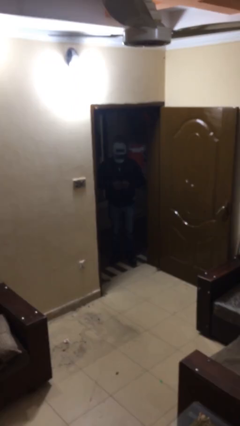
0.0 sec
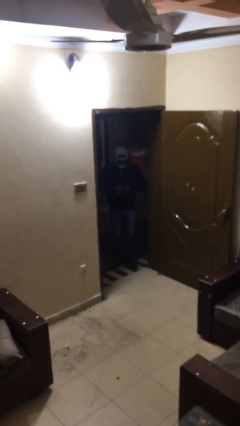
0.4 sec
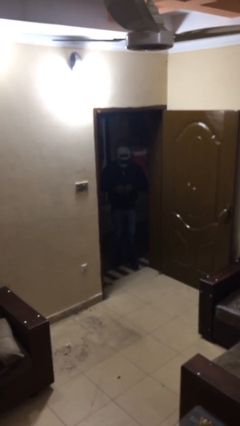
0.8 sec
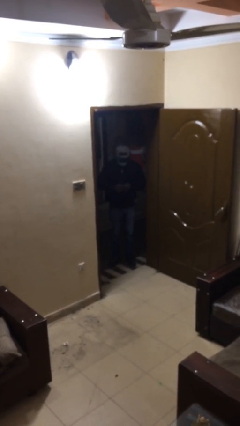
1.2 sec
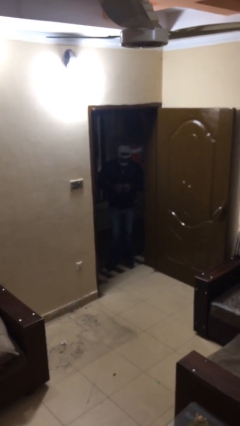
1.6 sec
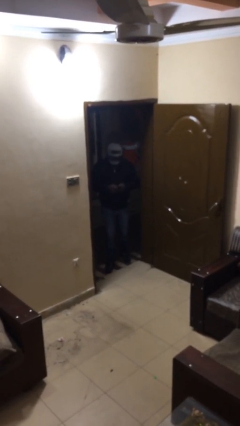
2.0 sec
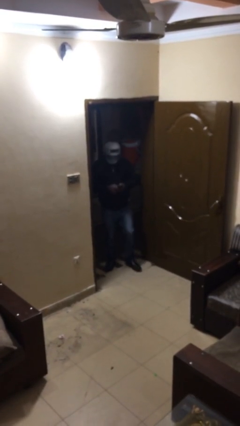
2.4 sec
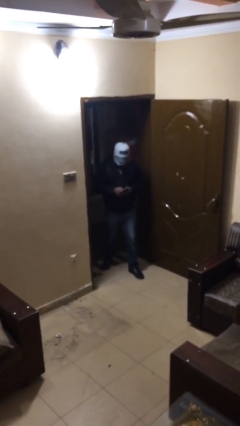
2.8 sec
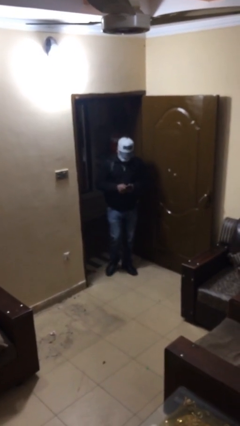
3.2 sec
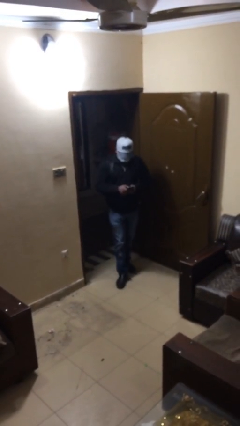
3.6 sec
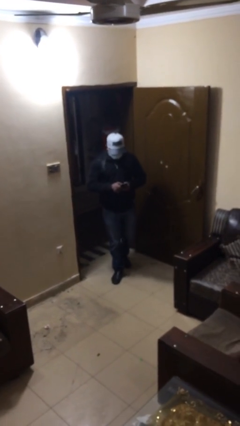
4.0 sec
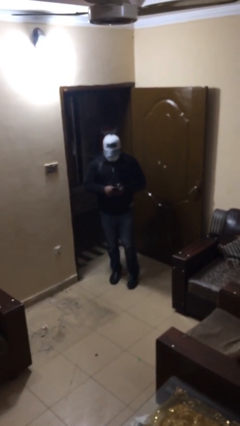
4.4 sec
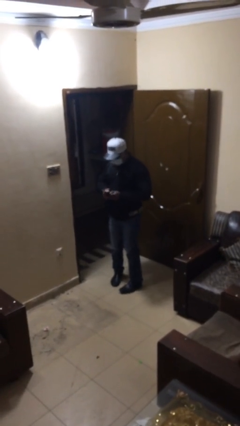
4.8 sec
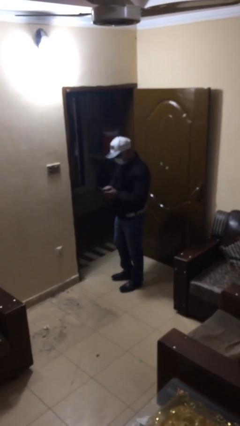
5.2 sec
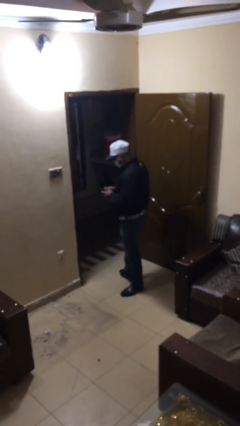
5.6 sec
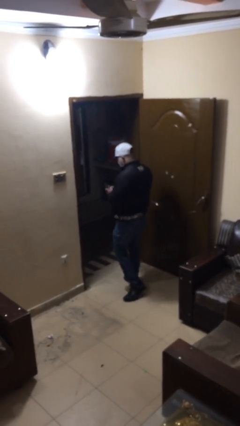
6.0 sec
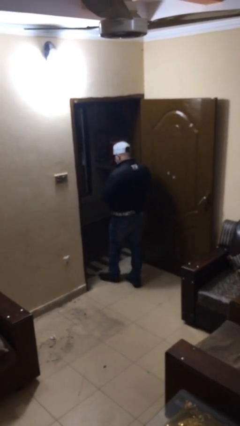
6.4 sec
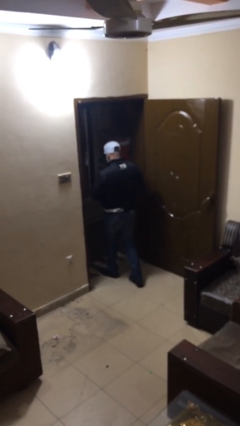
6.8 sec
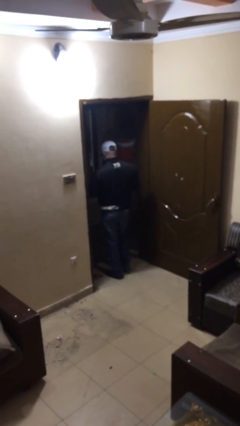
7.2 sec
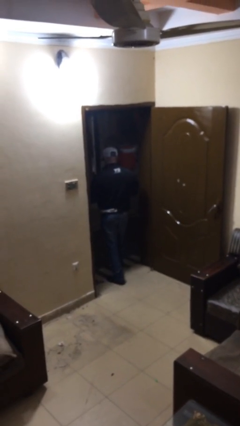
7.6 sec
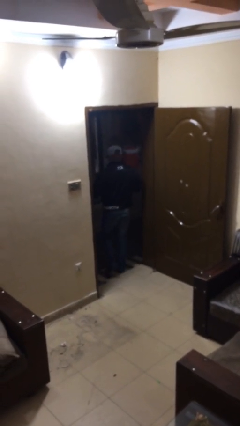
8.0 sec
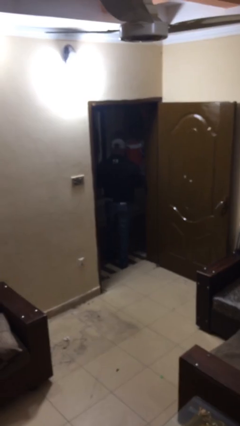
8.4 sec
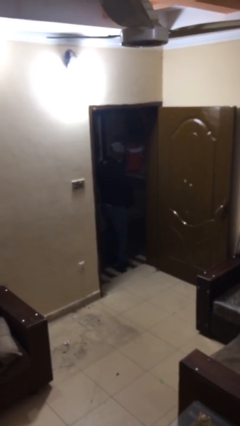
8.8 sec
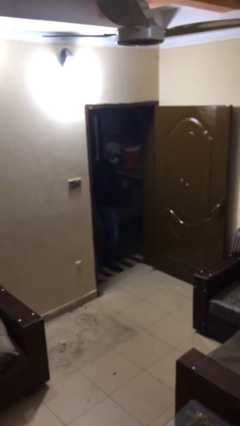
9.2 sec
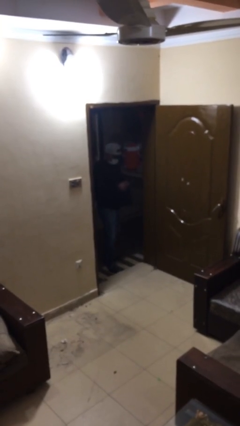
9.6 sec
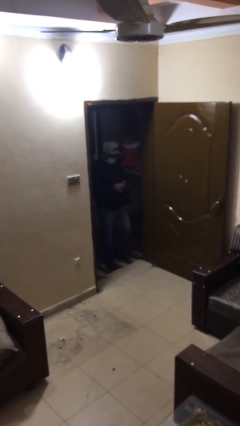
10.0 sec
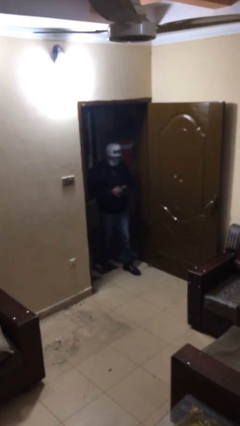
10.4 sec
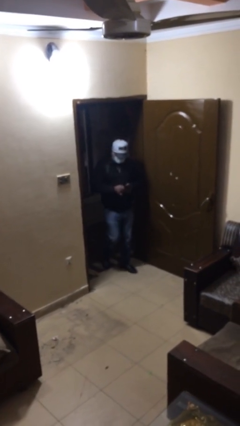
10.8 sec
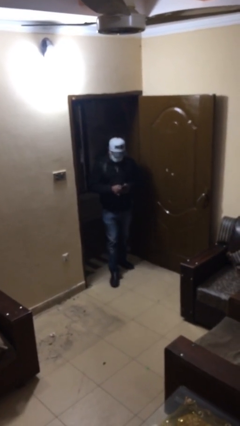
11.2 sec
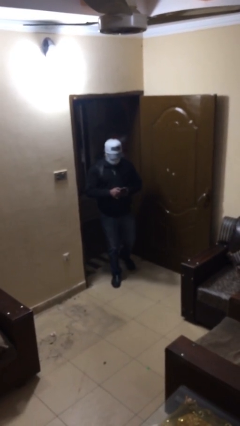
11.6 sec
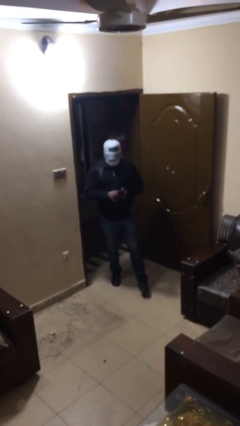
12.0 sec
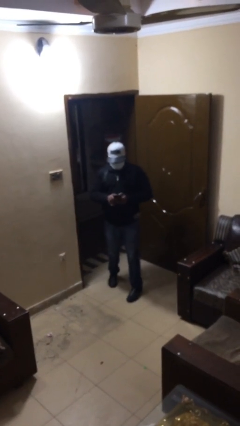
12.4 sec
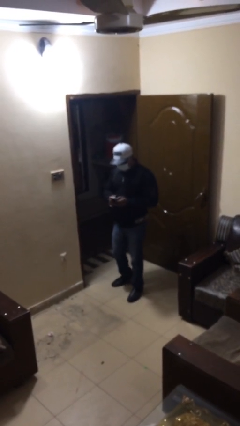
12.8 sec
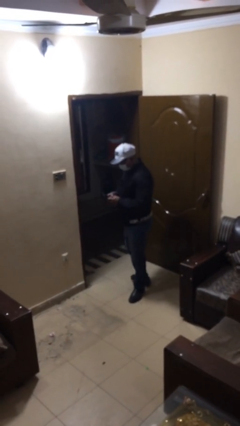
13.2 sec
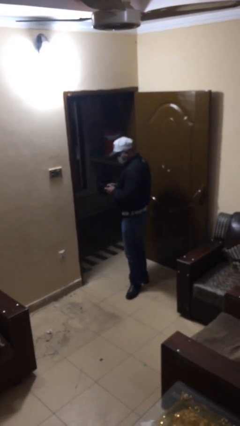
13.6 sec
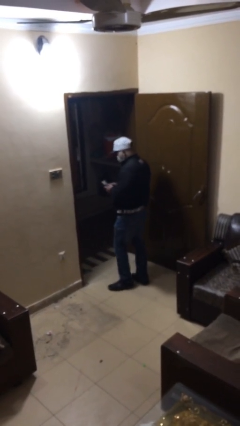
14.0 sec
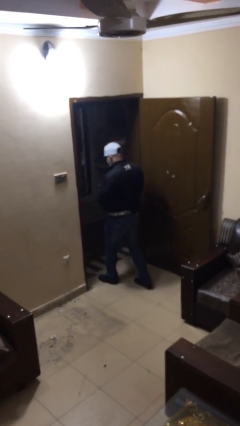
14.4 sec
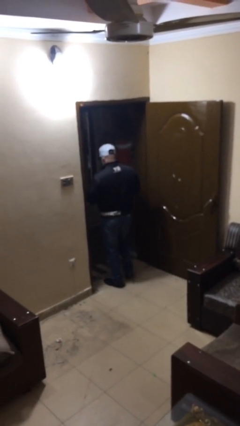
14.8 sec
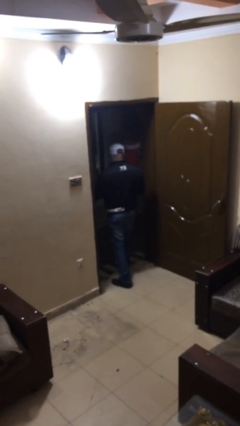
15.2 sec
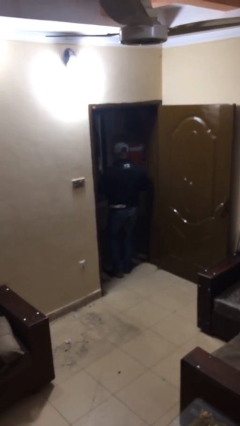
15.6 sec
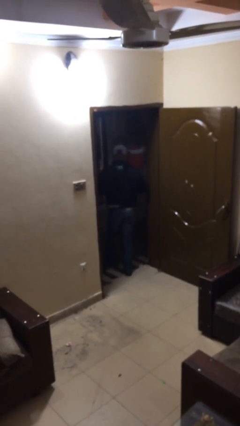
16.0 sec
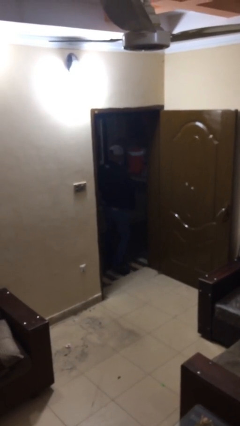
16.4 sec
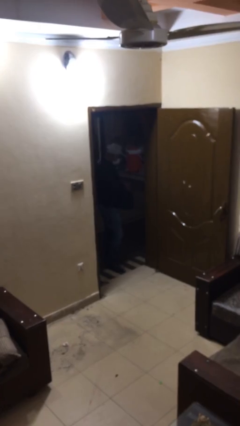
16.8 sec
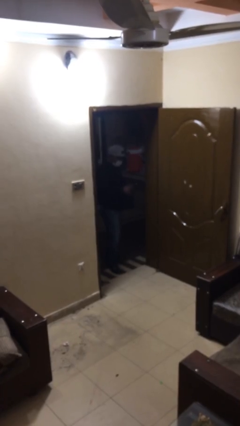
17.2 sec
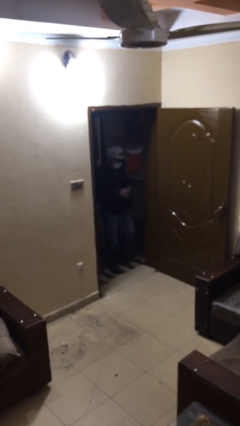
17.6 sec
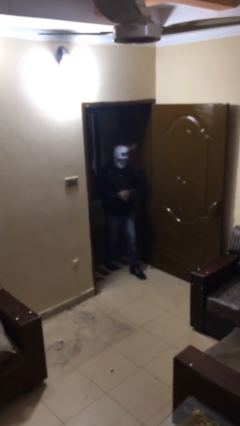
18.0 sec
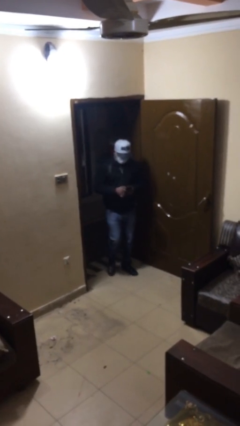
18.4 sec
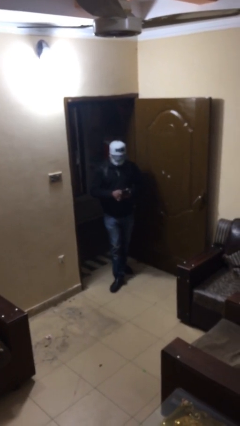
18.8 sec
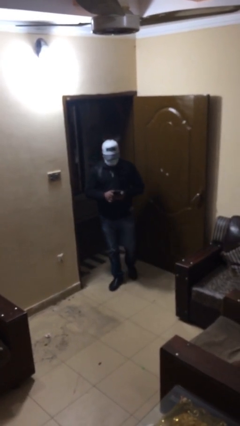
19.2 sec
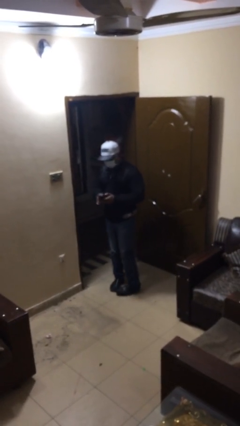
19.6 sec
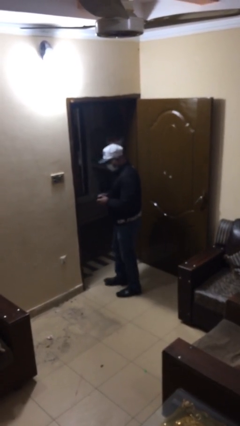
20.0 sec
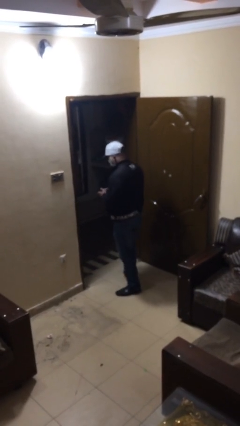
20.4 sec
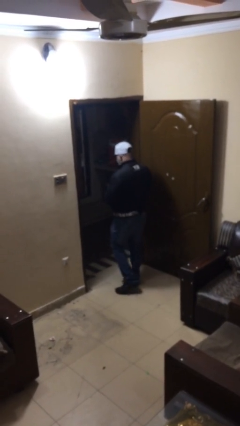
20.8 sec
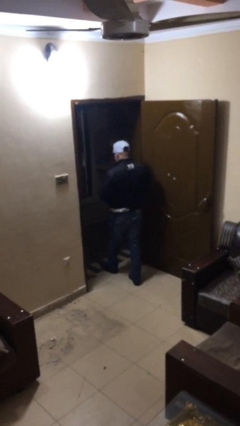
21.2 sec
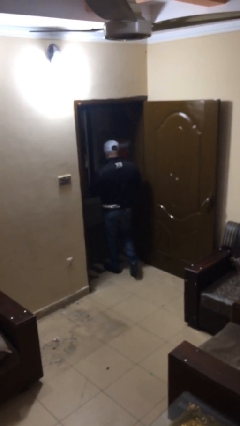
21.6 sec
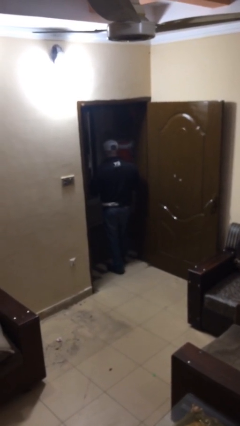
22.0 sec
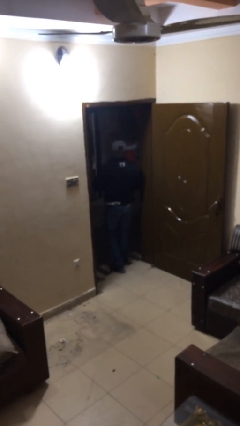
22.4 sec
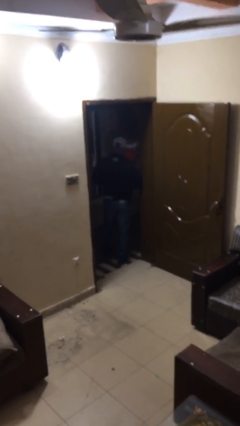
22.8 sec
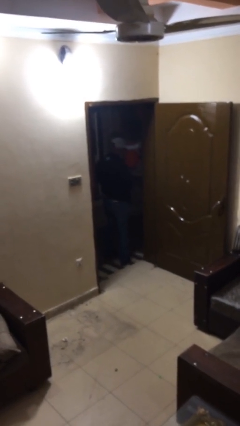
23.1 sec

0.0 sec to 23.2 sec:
person texts on phone

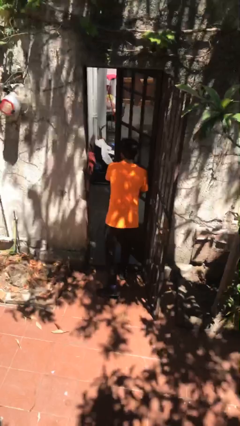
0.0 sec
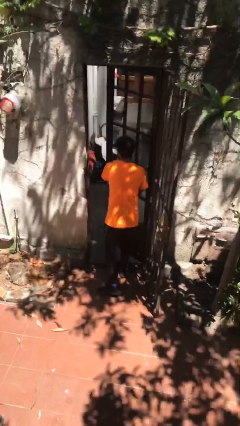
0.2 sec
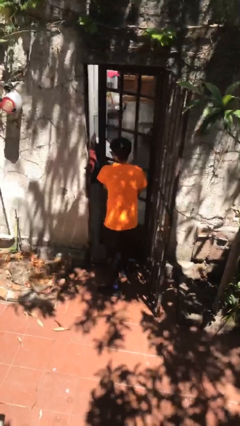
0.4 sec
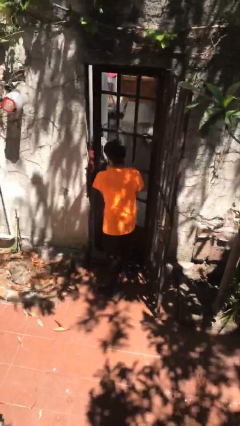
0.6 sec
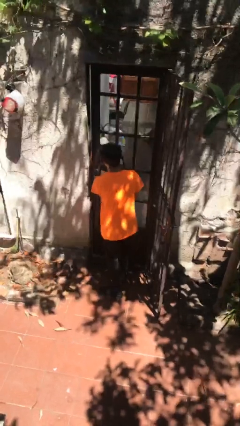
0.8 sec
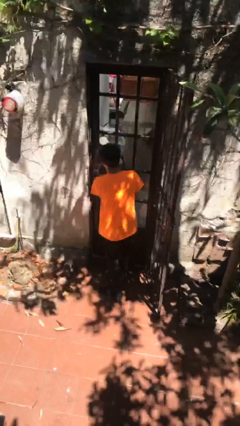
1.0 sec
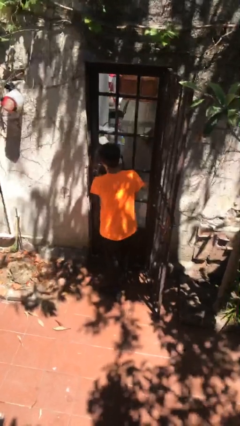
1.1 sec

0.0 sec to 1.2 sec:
person closes facility door

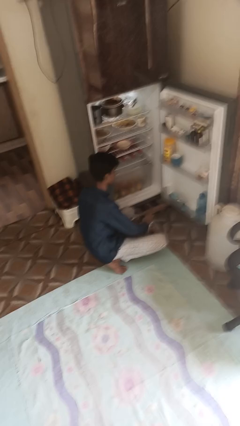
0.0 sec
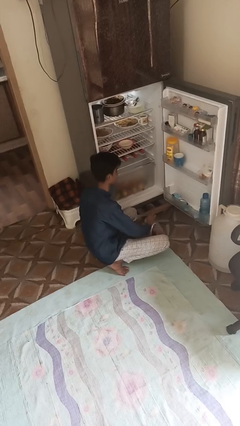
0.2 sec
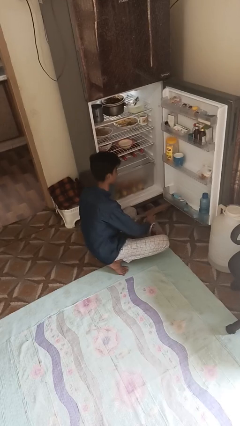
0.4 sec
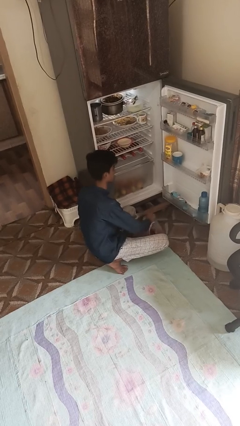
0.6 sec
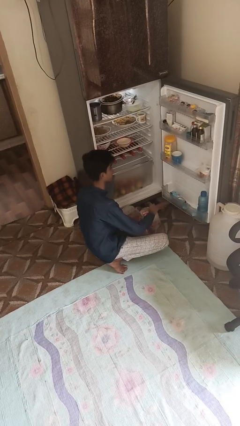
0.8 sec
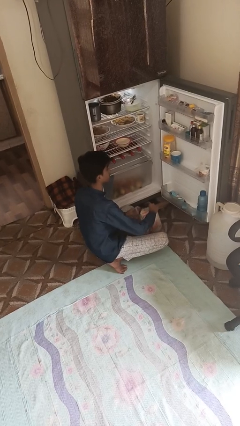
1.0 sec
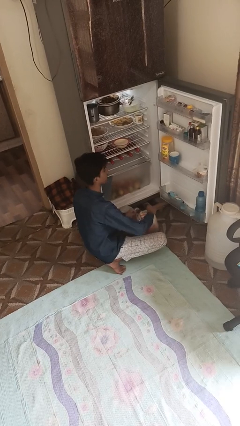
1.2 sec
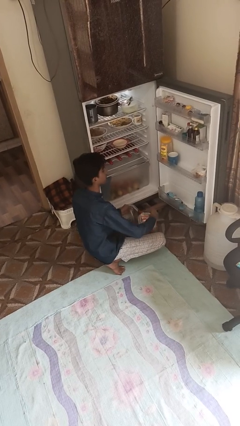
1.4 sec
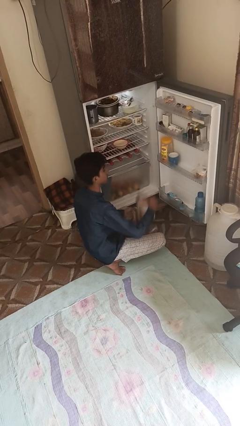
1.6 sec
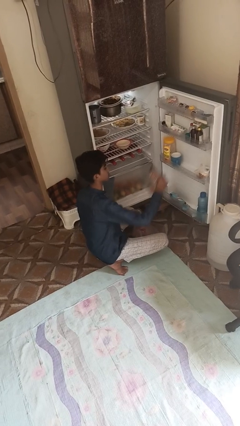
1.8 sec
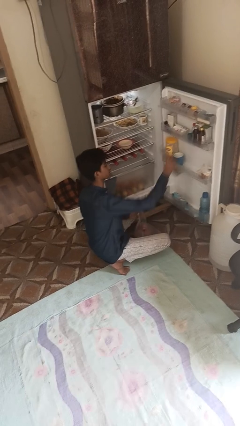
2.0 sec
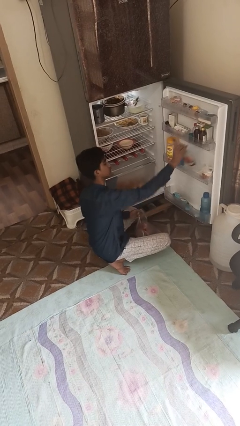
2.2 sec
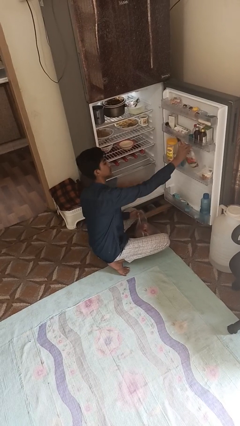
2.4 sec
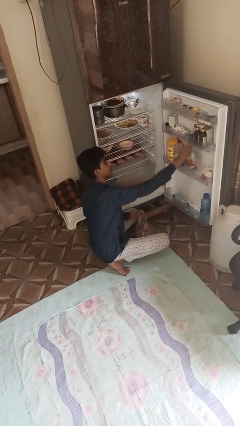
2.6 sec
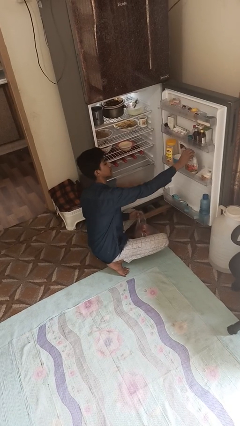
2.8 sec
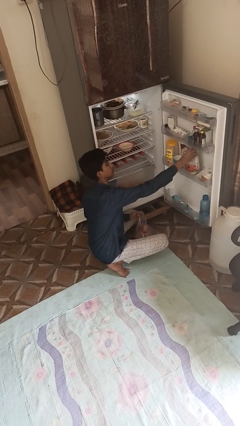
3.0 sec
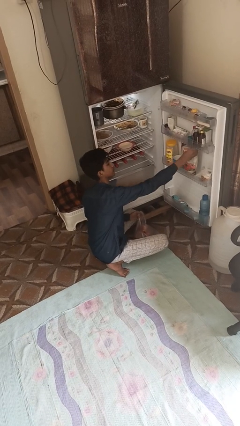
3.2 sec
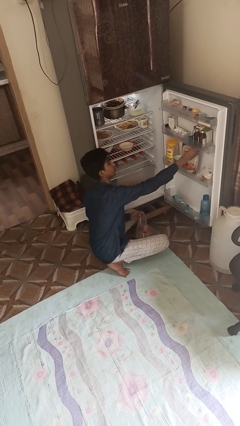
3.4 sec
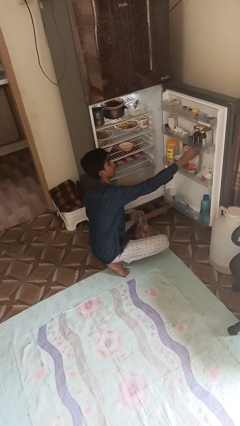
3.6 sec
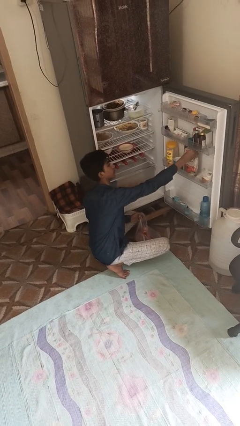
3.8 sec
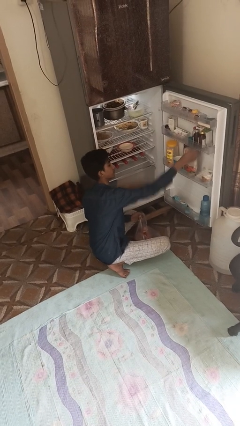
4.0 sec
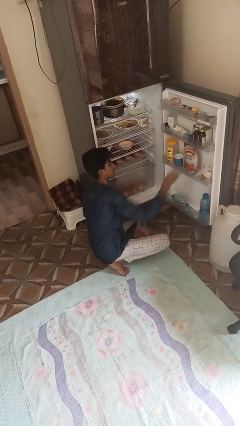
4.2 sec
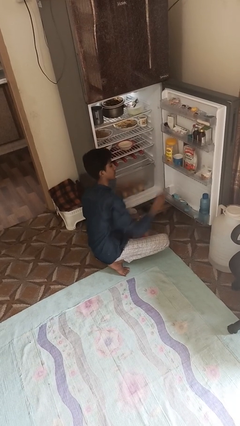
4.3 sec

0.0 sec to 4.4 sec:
person loads groceries into refrigerator

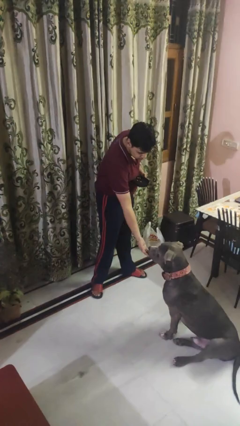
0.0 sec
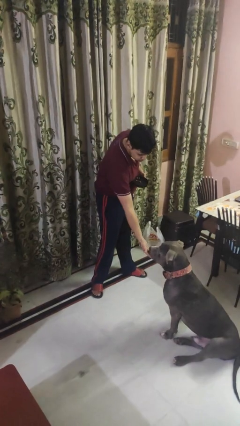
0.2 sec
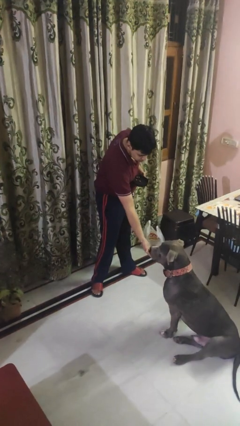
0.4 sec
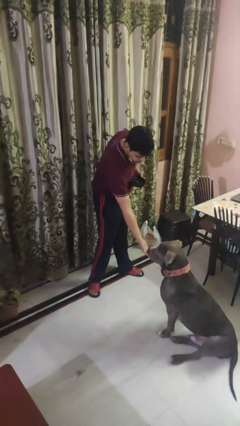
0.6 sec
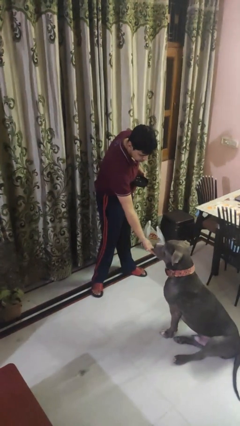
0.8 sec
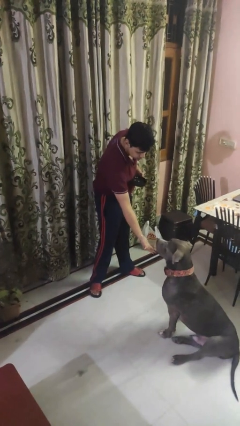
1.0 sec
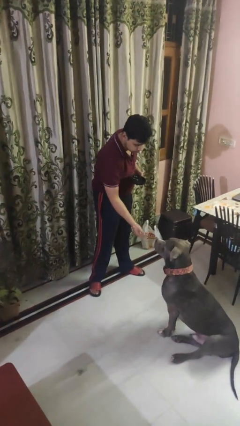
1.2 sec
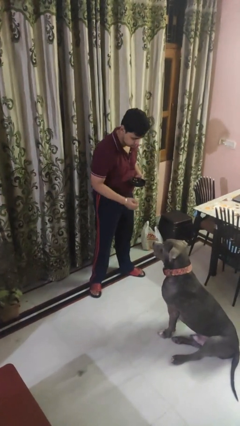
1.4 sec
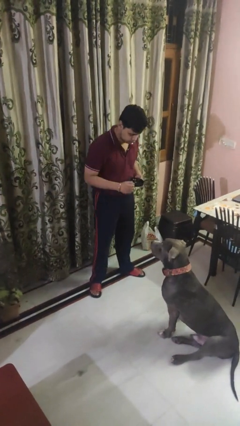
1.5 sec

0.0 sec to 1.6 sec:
person feeds dog
